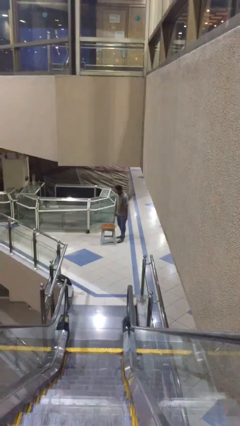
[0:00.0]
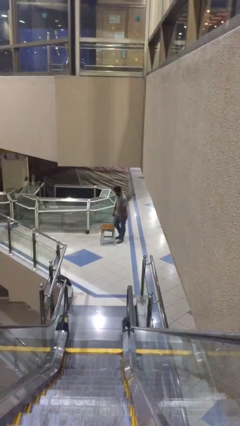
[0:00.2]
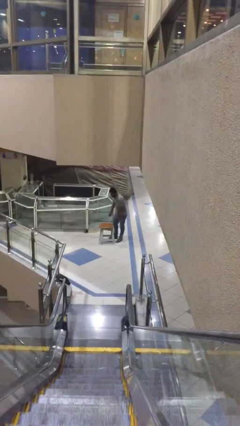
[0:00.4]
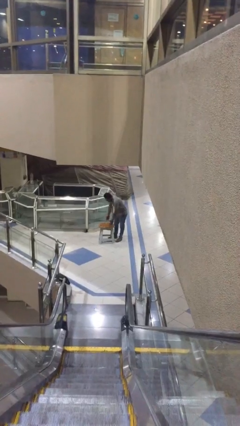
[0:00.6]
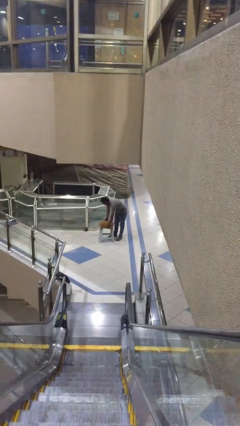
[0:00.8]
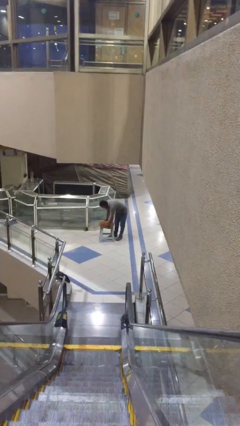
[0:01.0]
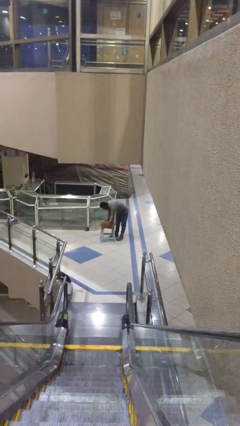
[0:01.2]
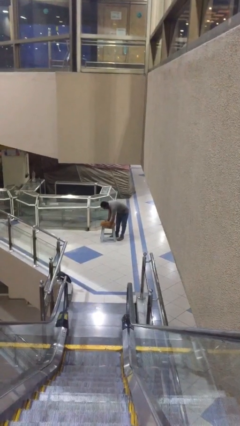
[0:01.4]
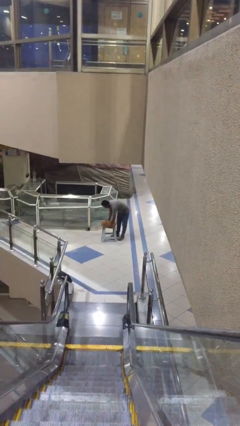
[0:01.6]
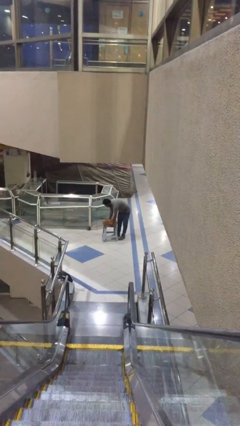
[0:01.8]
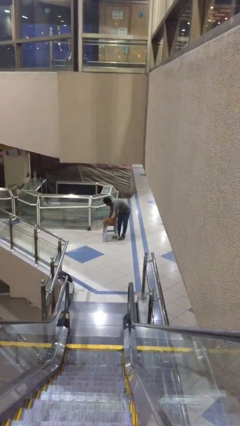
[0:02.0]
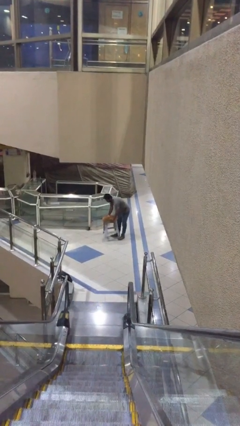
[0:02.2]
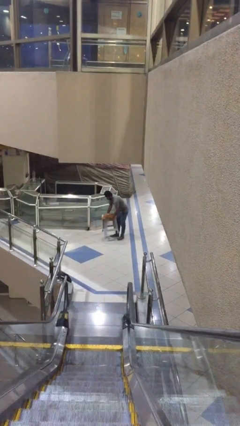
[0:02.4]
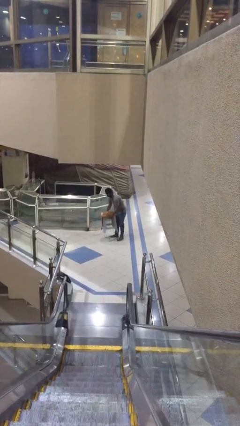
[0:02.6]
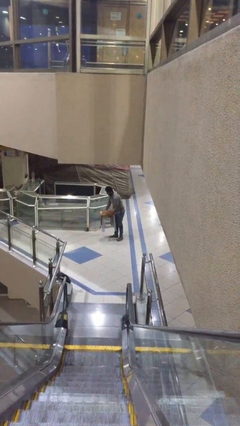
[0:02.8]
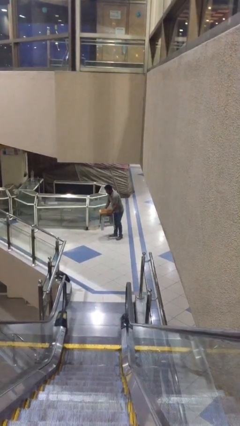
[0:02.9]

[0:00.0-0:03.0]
person picks up object from floor

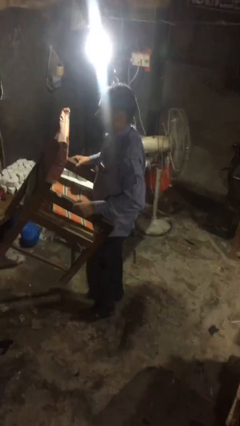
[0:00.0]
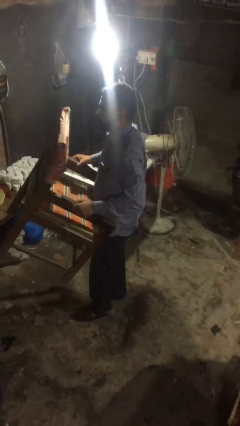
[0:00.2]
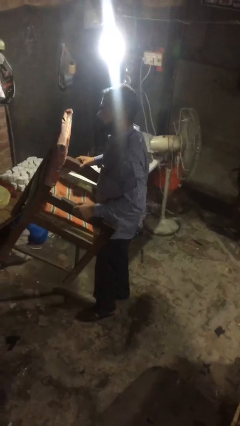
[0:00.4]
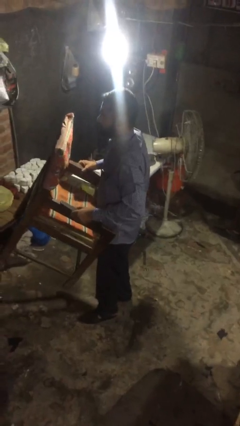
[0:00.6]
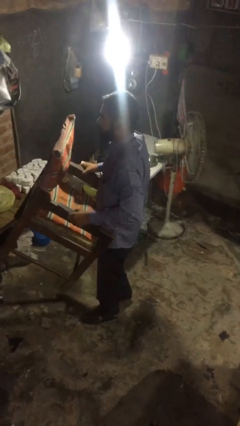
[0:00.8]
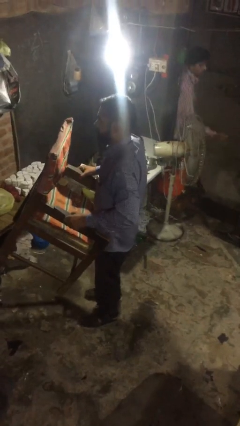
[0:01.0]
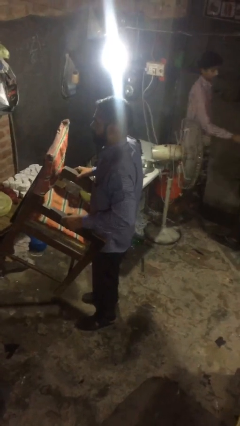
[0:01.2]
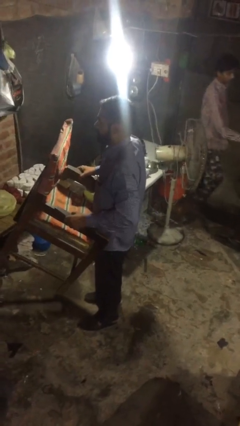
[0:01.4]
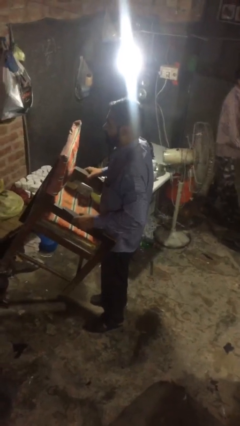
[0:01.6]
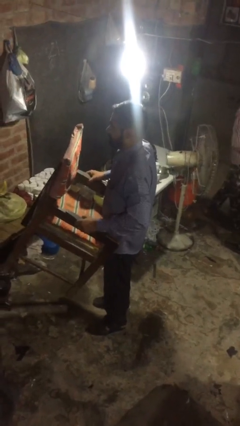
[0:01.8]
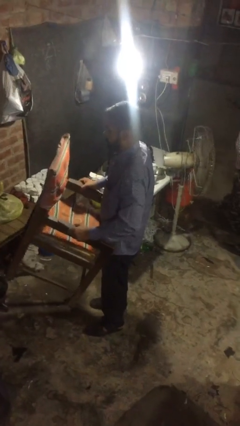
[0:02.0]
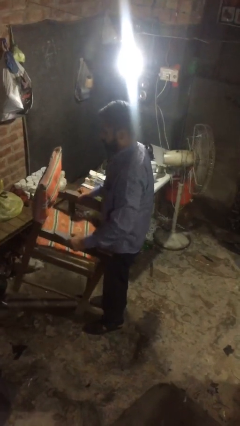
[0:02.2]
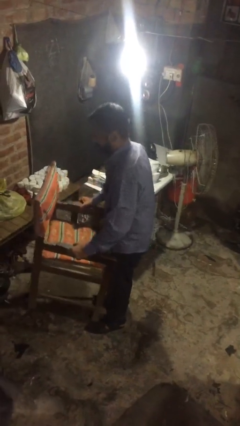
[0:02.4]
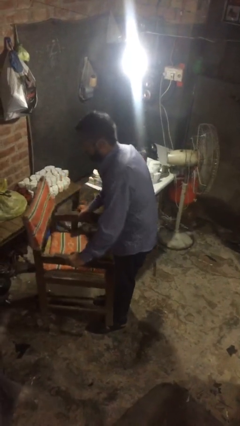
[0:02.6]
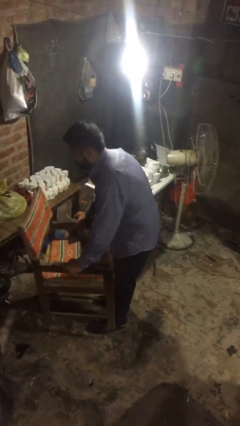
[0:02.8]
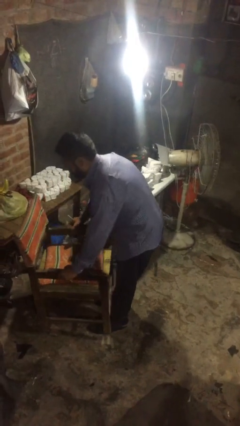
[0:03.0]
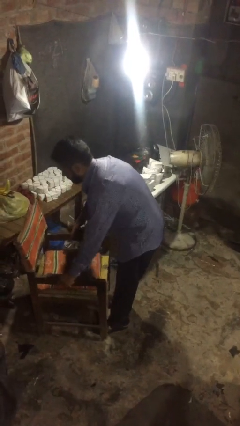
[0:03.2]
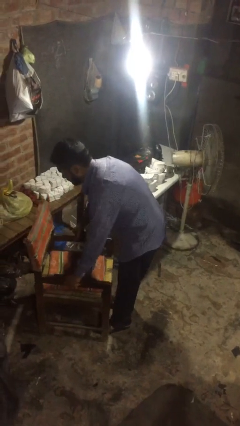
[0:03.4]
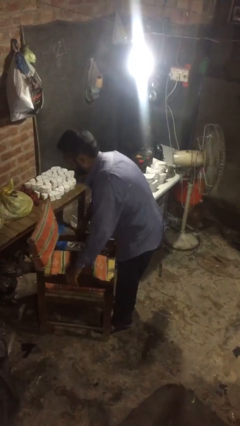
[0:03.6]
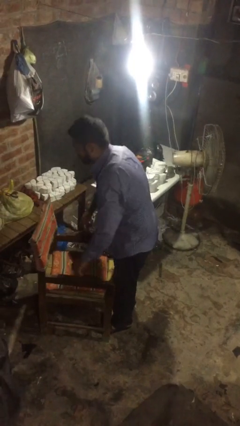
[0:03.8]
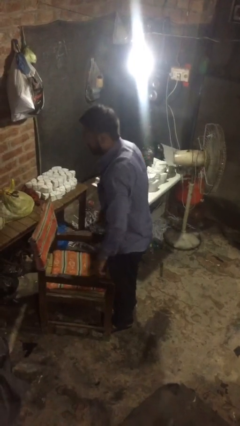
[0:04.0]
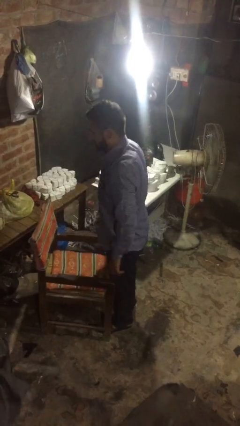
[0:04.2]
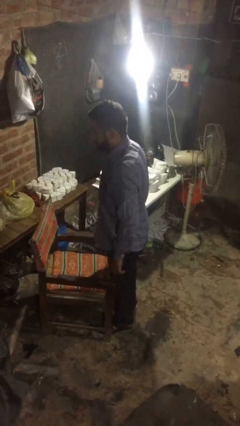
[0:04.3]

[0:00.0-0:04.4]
person puts down object on floor

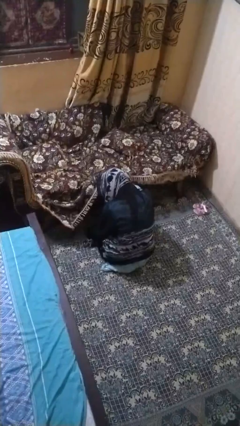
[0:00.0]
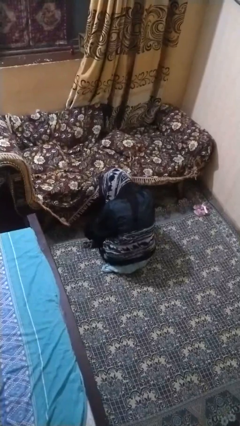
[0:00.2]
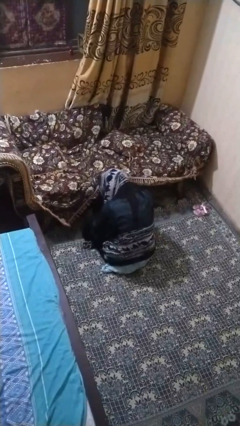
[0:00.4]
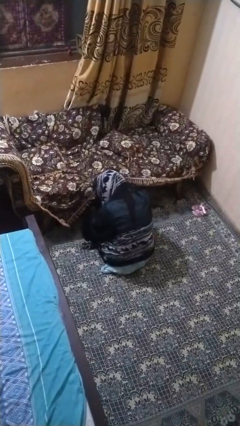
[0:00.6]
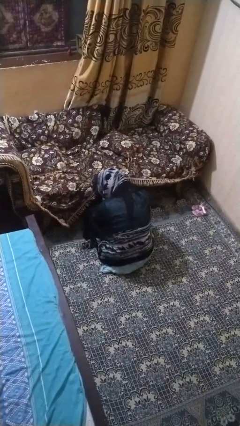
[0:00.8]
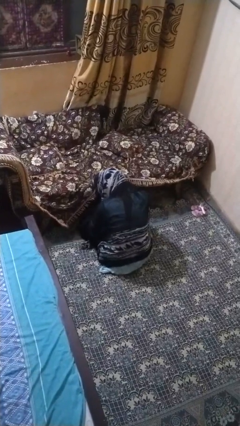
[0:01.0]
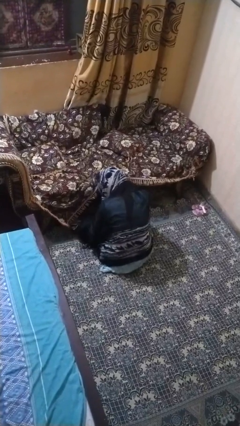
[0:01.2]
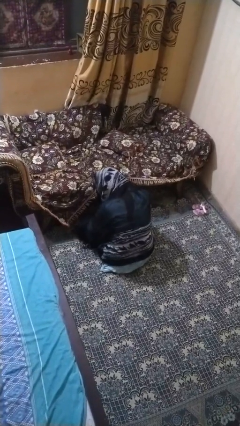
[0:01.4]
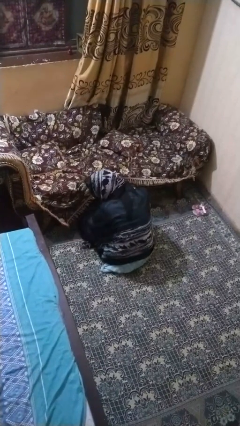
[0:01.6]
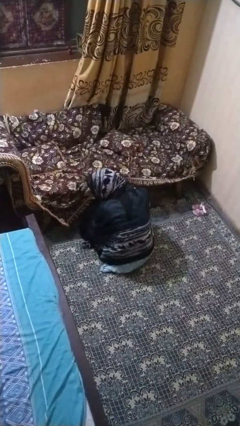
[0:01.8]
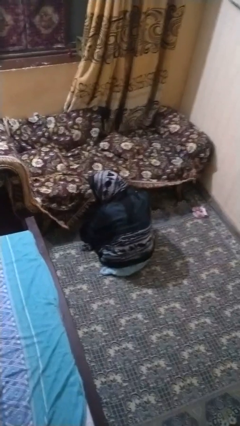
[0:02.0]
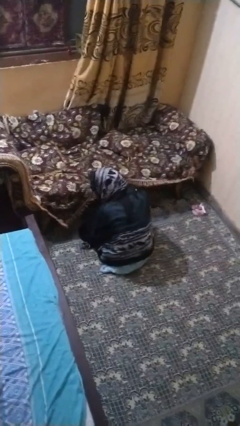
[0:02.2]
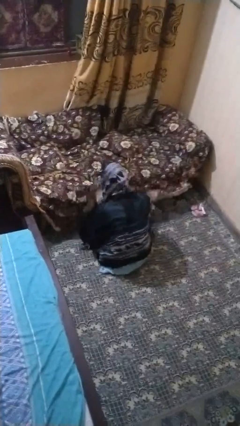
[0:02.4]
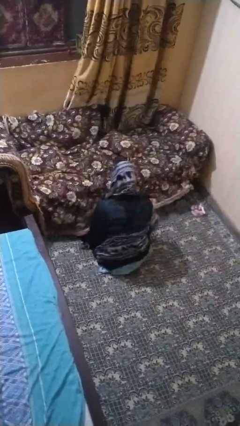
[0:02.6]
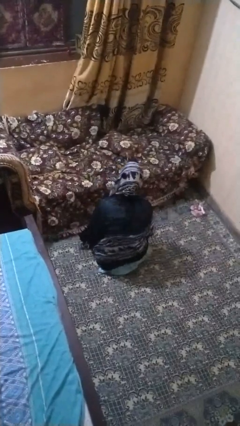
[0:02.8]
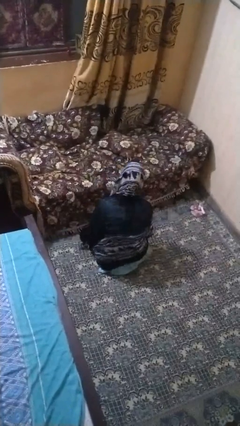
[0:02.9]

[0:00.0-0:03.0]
person searches under couch

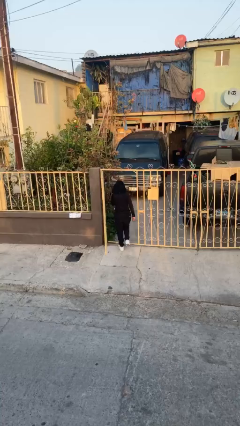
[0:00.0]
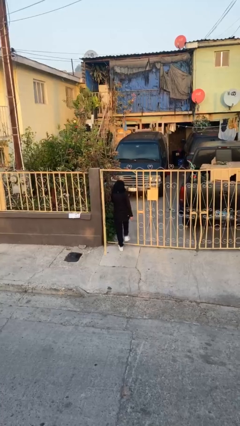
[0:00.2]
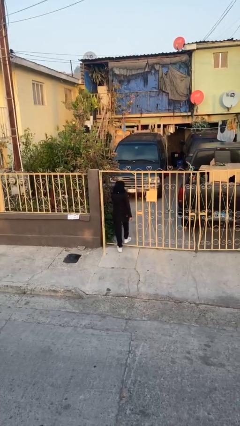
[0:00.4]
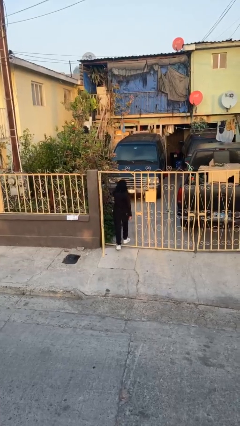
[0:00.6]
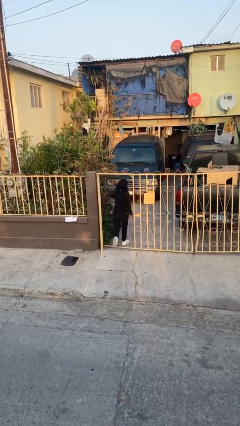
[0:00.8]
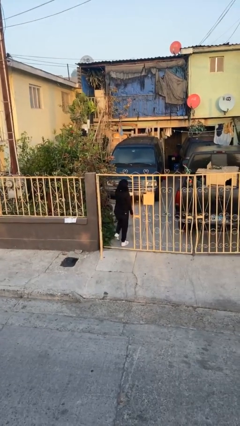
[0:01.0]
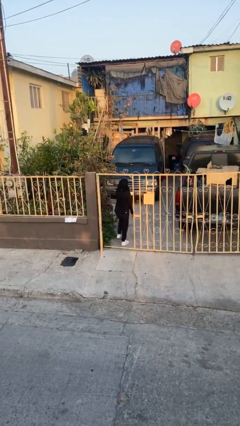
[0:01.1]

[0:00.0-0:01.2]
person exits scene through structure

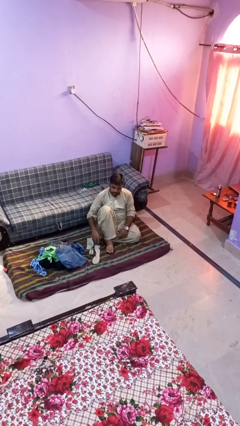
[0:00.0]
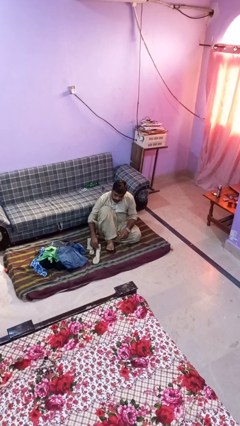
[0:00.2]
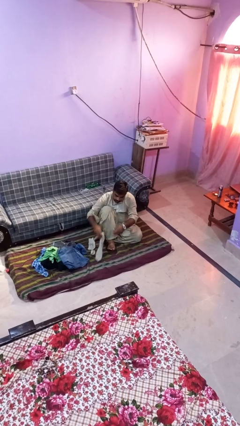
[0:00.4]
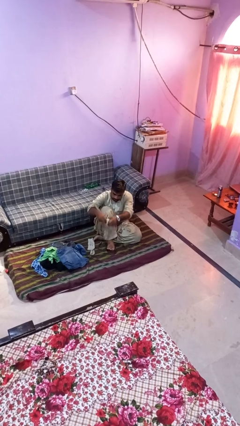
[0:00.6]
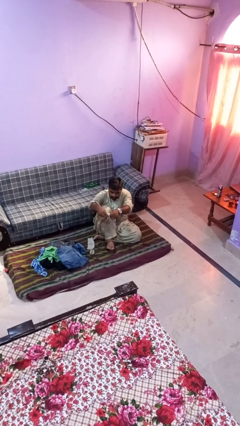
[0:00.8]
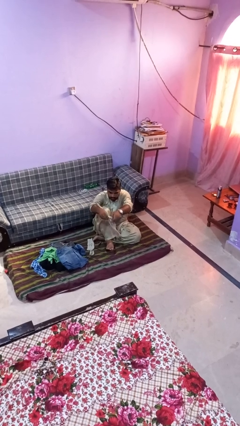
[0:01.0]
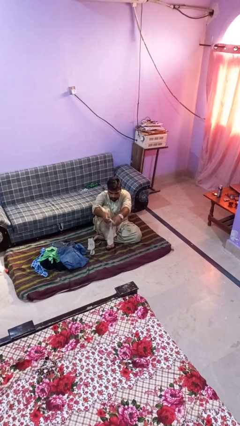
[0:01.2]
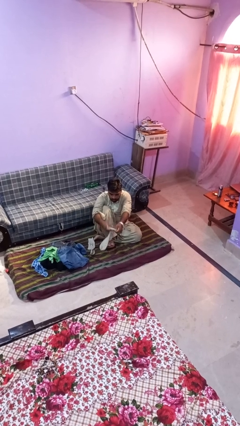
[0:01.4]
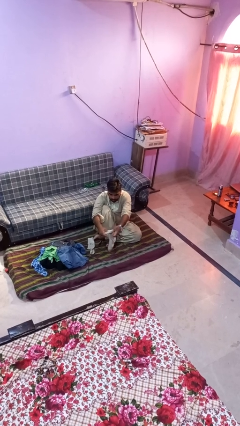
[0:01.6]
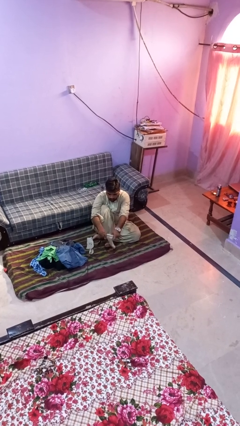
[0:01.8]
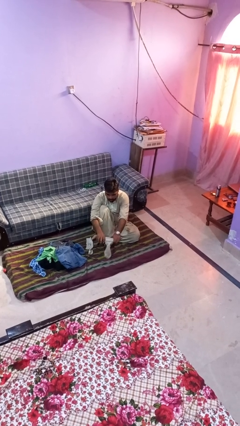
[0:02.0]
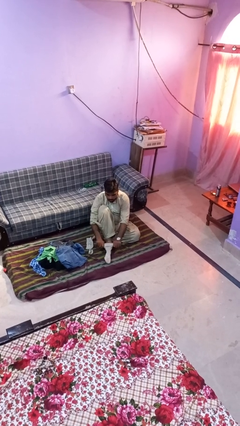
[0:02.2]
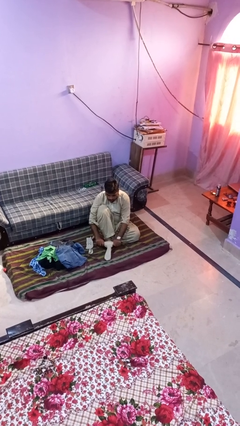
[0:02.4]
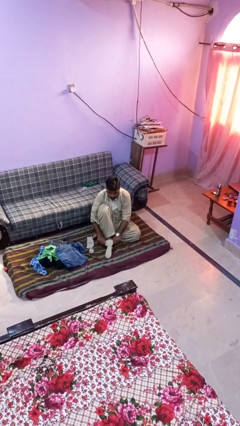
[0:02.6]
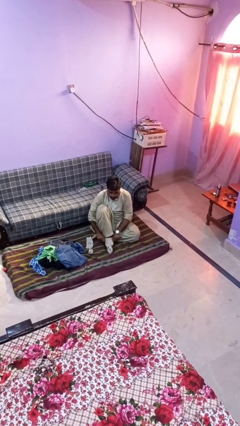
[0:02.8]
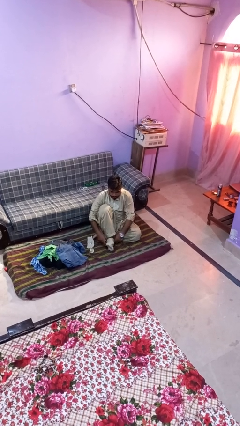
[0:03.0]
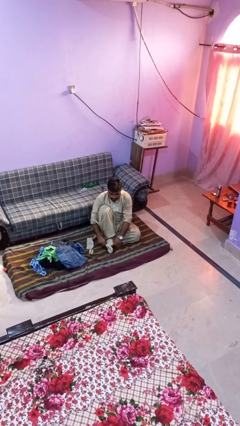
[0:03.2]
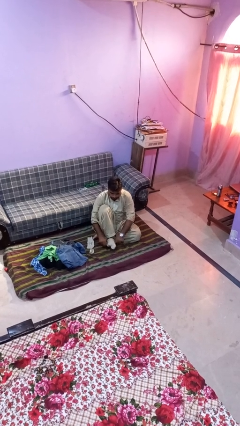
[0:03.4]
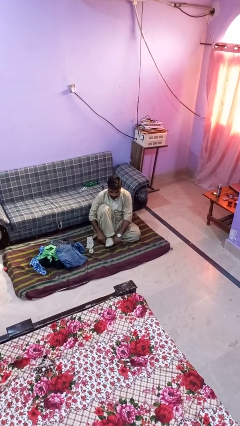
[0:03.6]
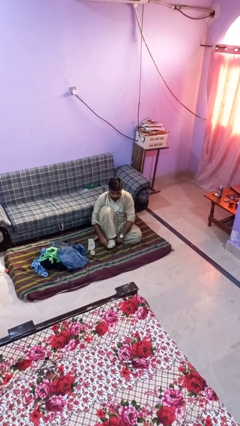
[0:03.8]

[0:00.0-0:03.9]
person puts on socks

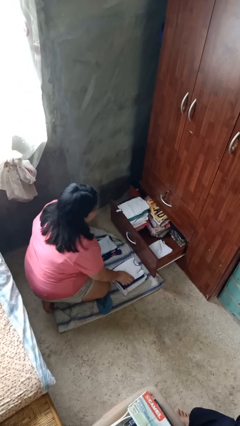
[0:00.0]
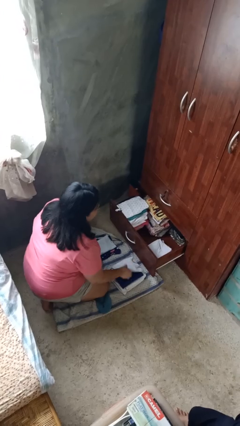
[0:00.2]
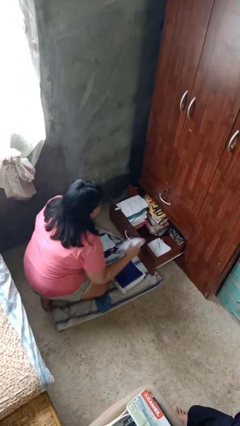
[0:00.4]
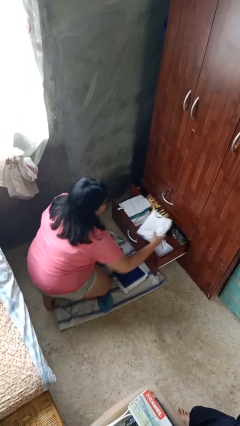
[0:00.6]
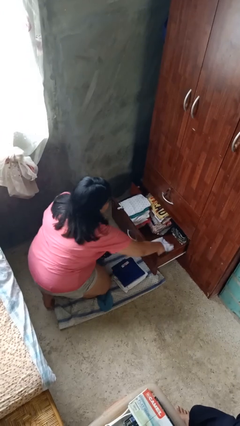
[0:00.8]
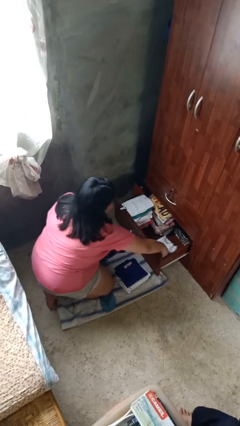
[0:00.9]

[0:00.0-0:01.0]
person puts clothes into dresser

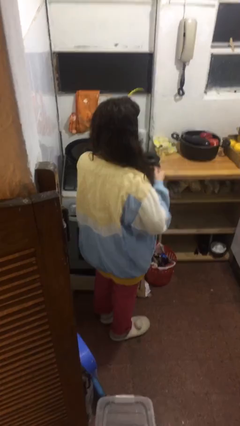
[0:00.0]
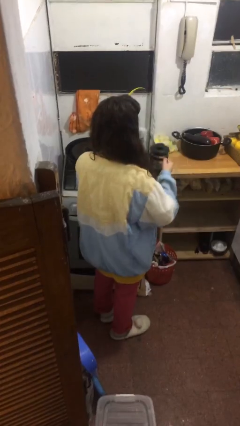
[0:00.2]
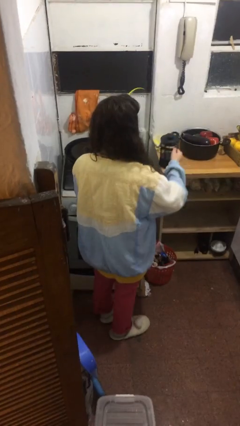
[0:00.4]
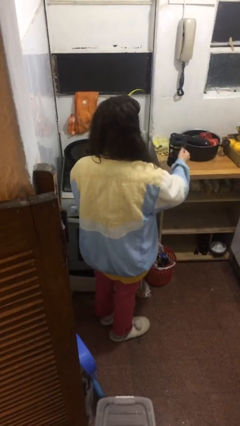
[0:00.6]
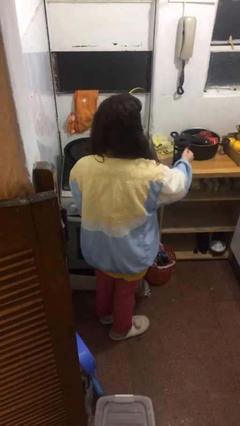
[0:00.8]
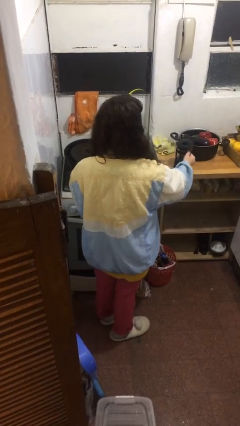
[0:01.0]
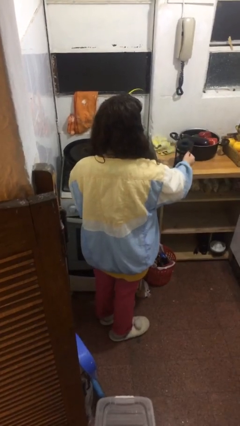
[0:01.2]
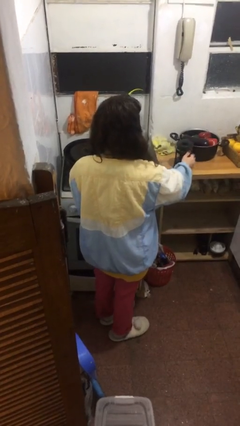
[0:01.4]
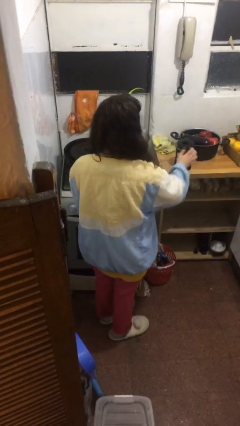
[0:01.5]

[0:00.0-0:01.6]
person puts down object on countertop
